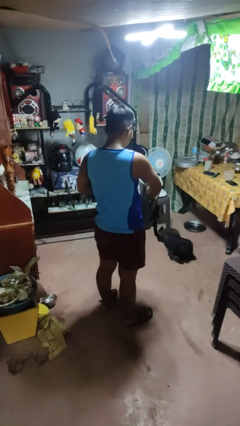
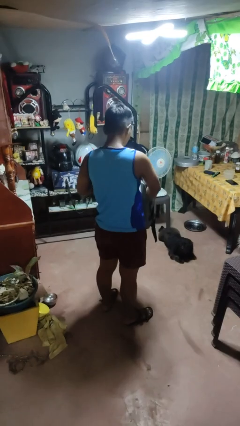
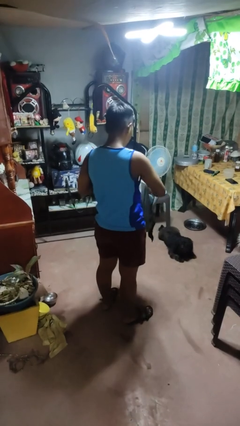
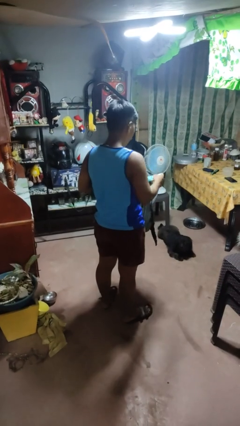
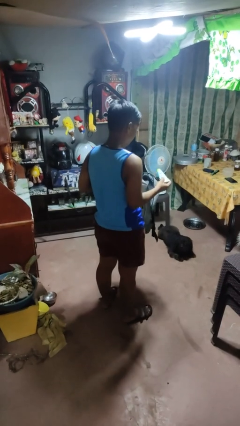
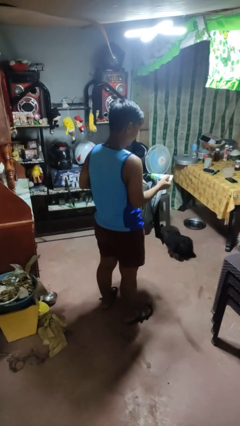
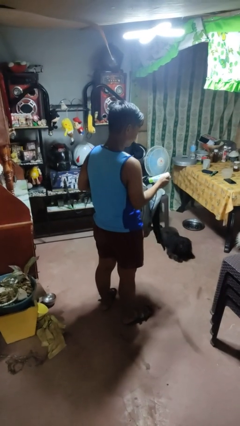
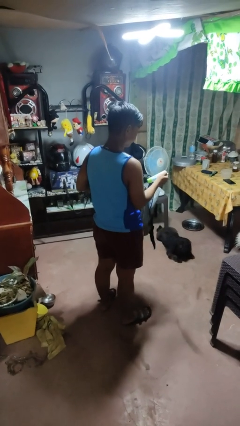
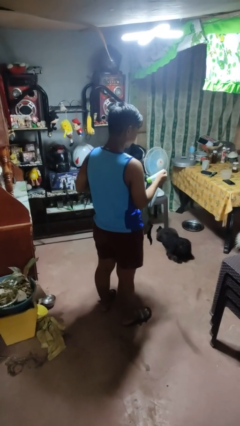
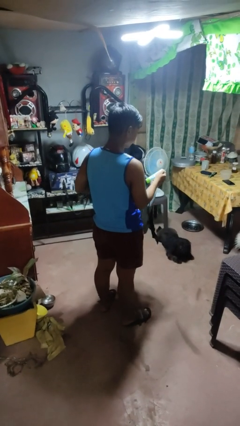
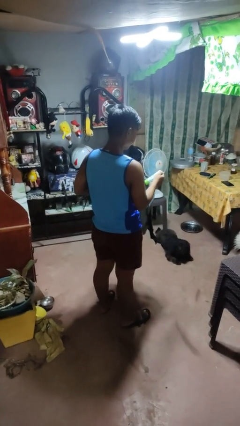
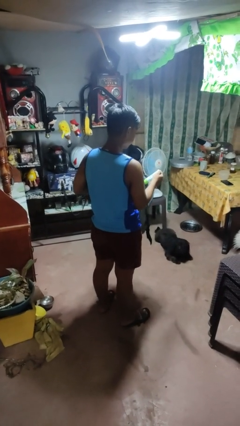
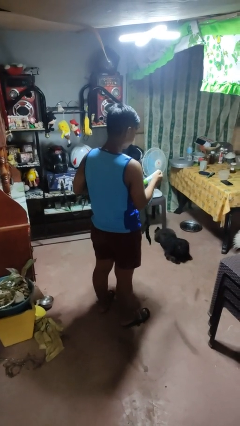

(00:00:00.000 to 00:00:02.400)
person takes object from bag

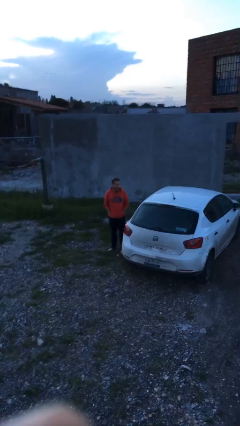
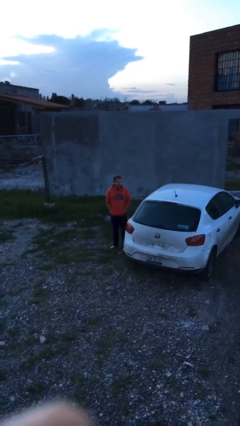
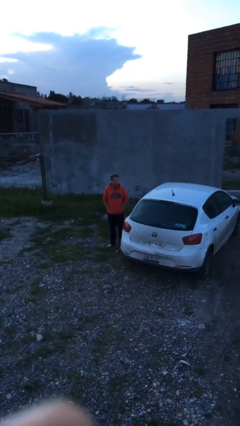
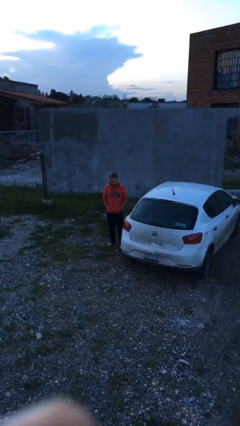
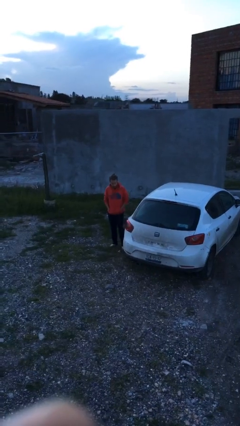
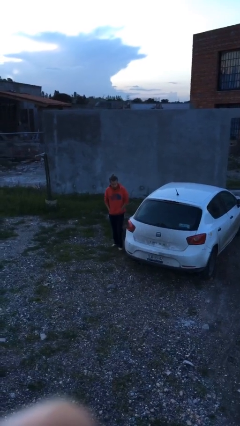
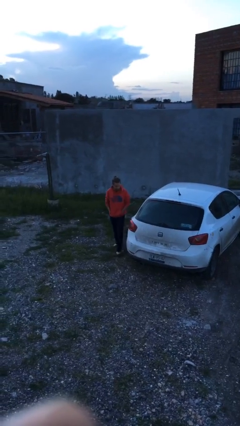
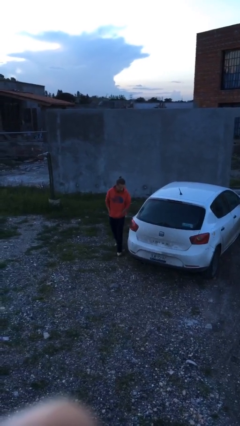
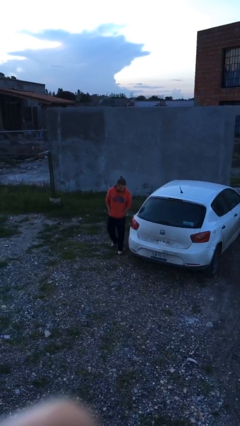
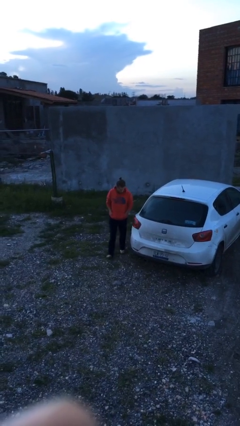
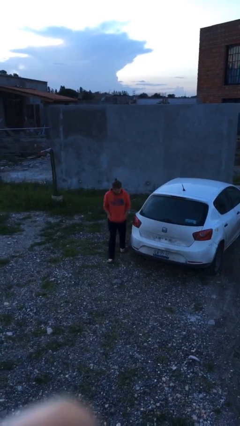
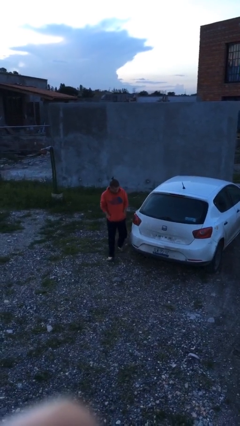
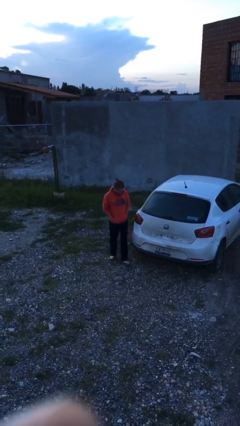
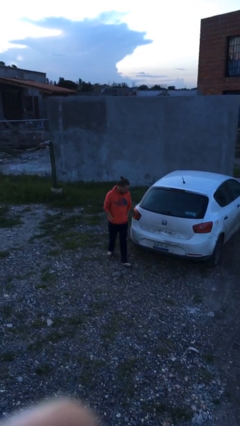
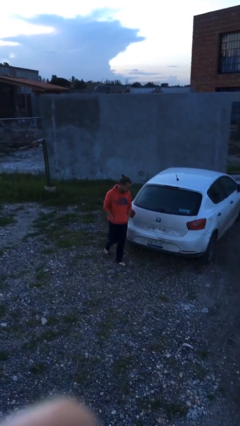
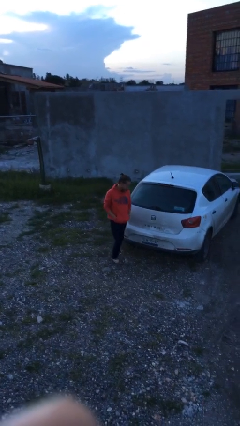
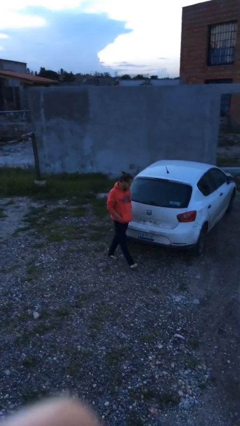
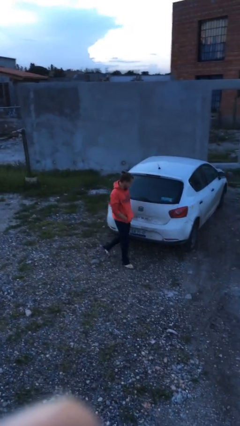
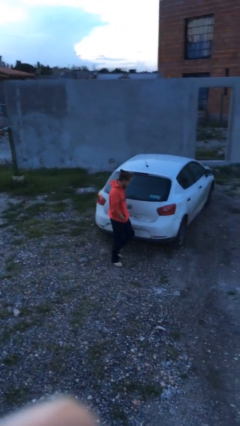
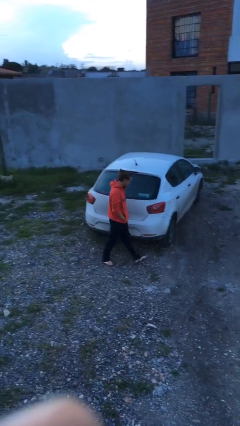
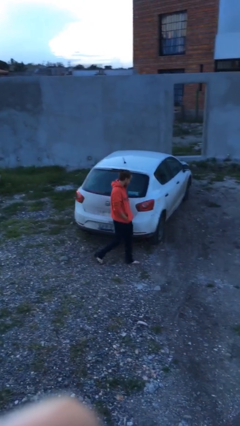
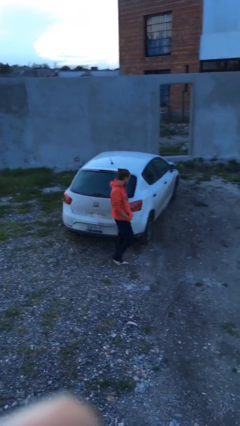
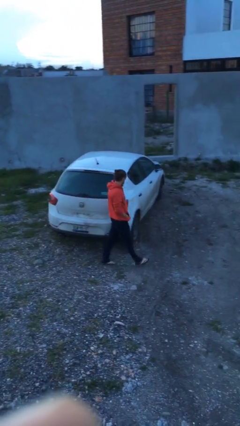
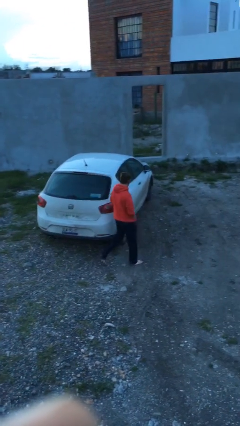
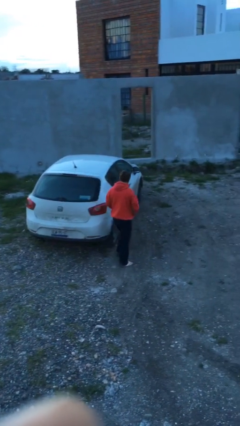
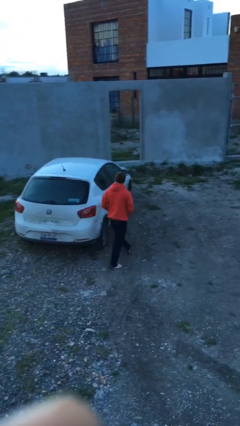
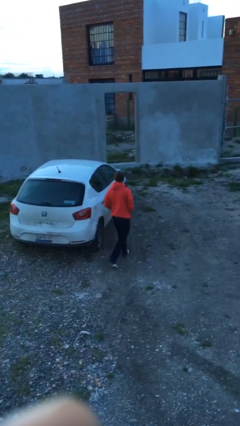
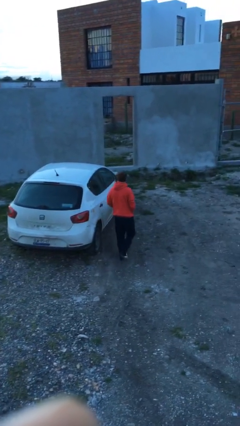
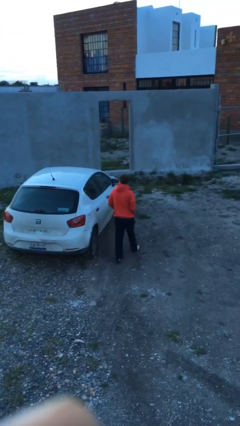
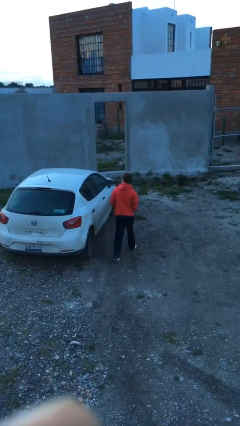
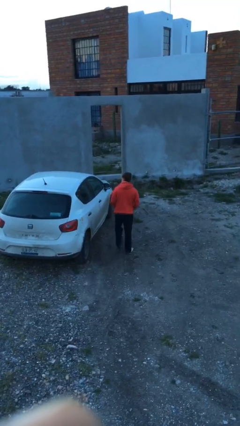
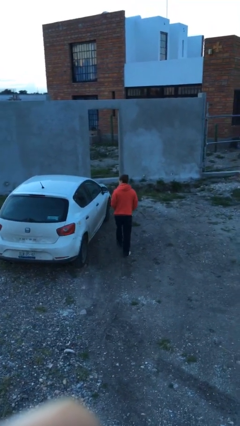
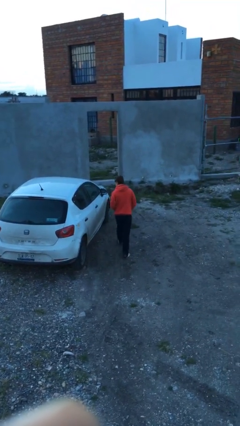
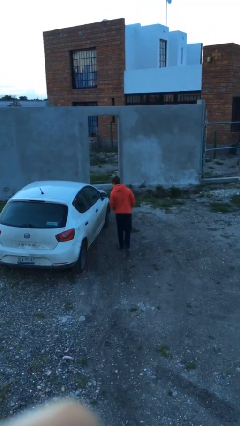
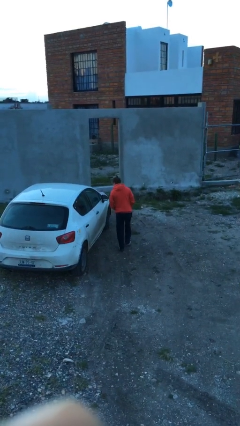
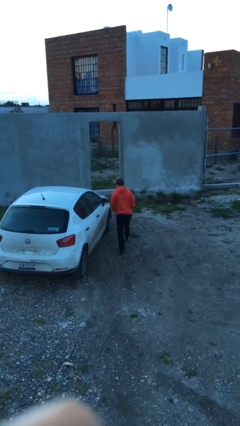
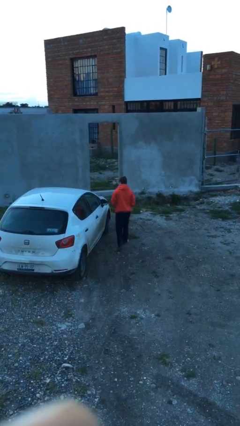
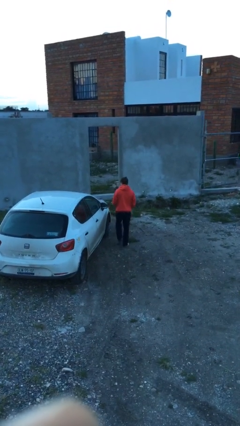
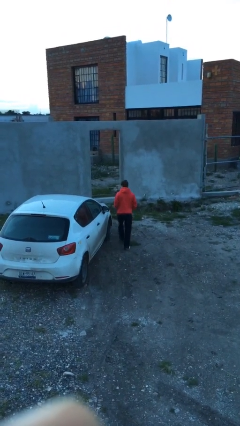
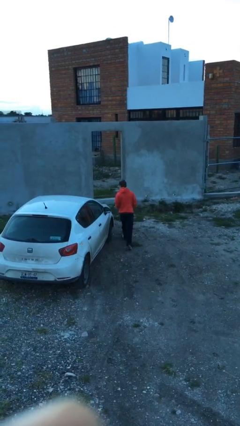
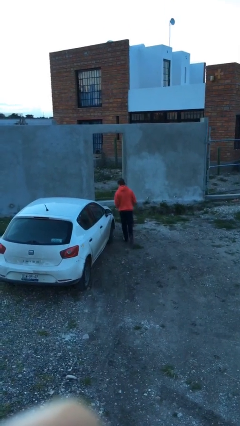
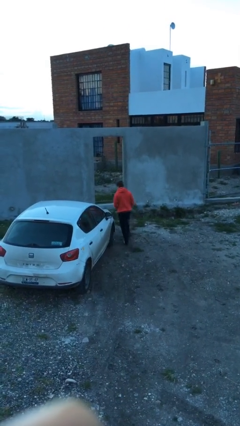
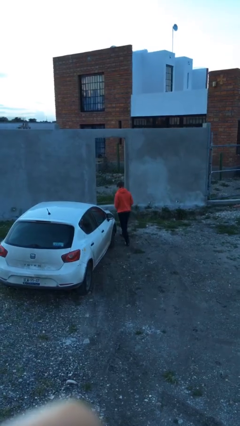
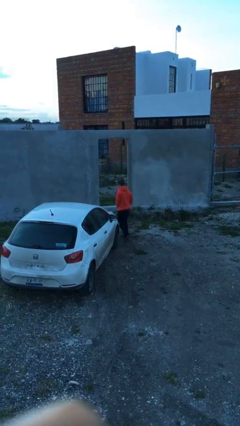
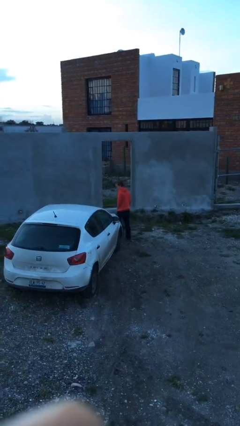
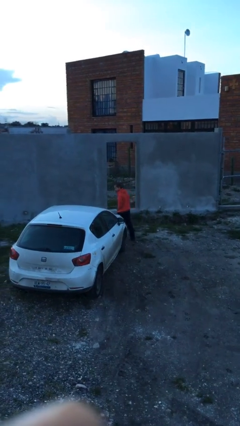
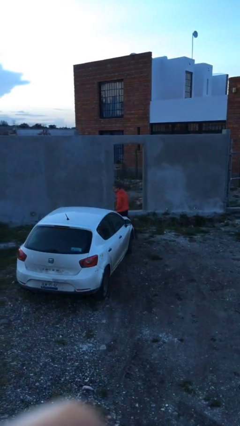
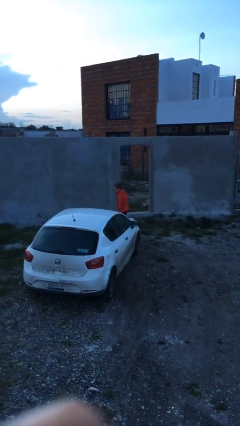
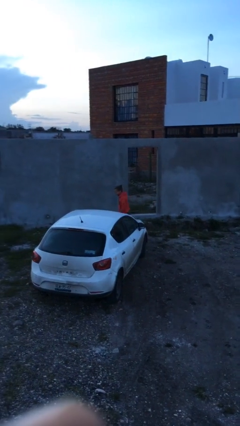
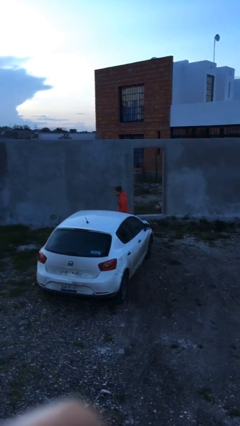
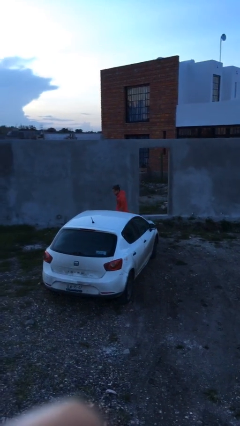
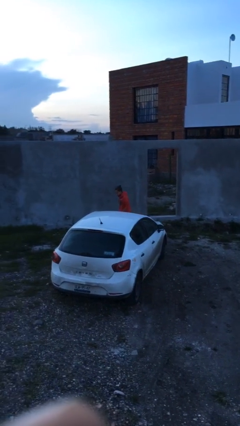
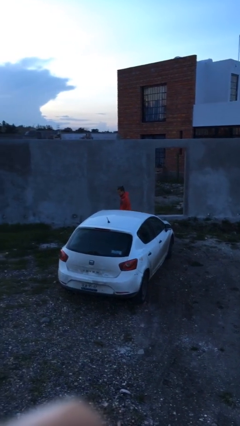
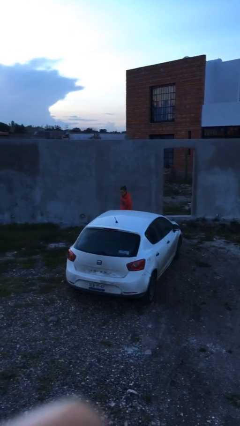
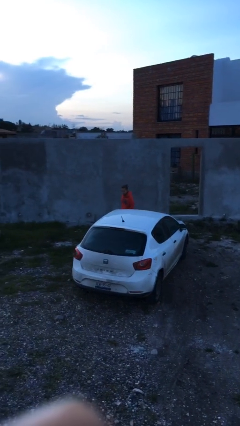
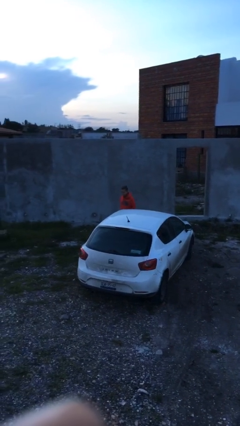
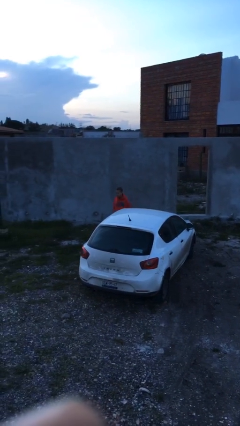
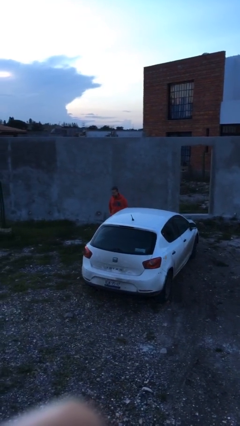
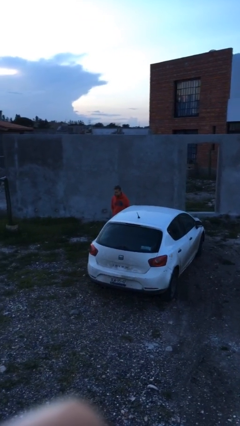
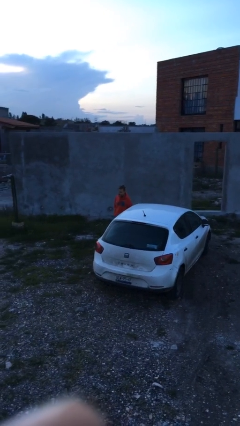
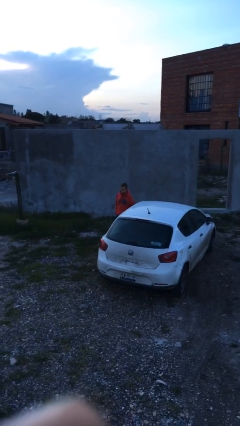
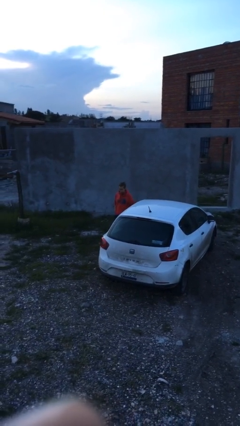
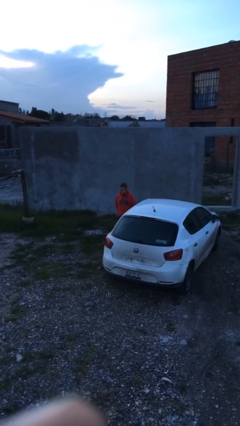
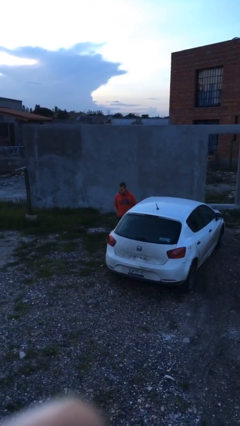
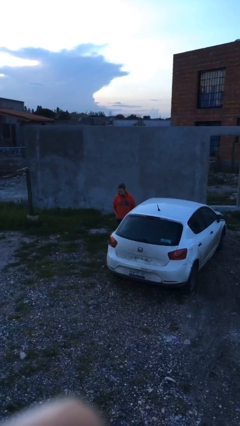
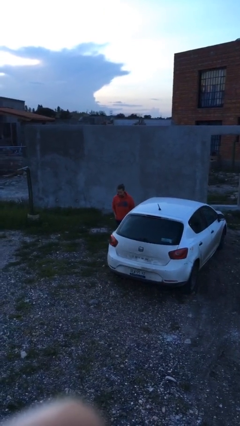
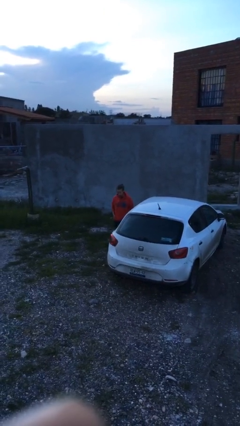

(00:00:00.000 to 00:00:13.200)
person walks around car

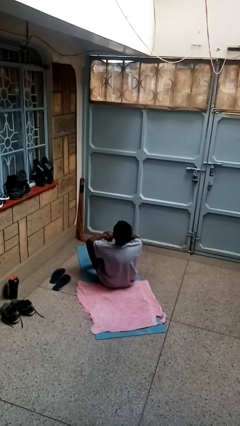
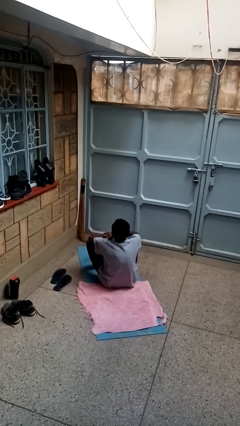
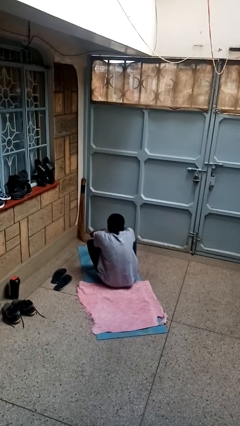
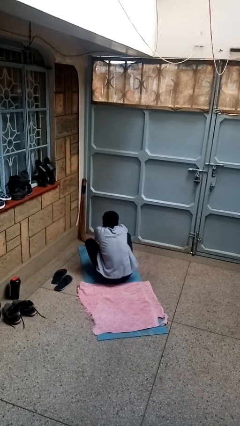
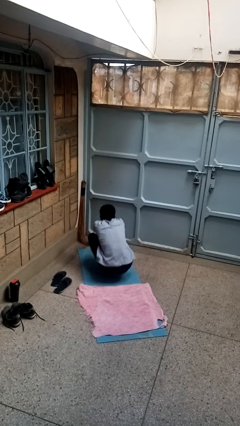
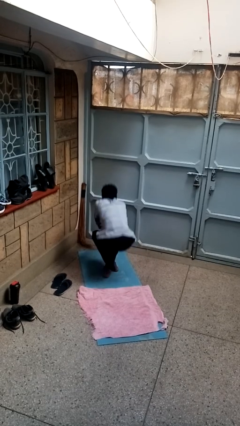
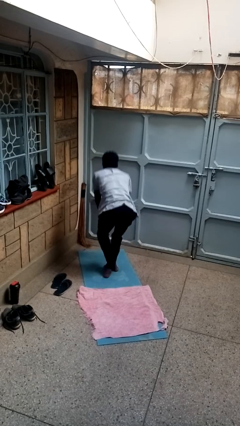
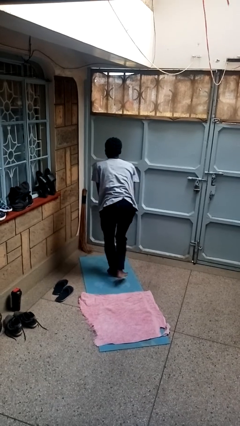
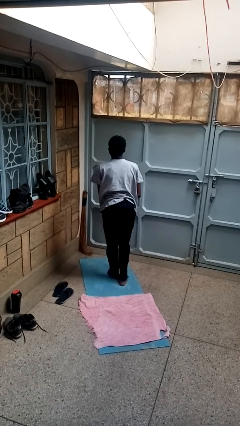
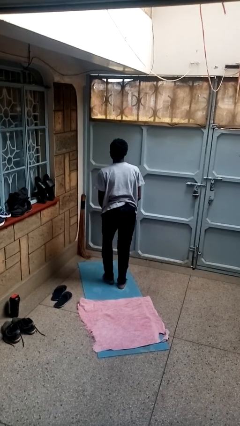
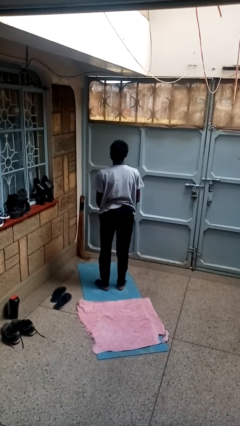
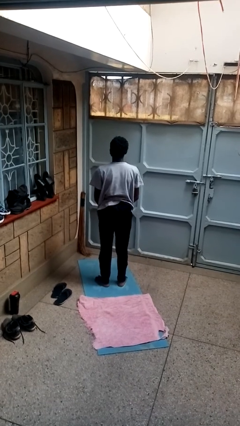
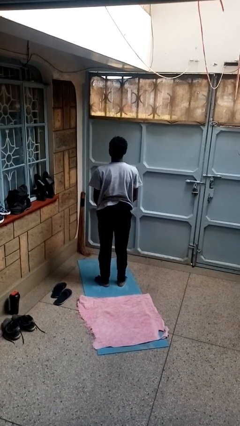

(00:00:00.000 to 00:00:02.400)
person stands up from floor
